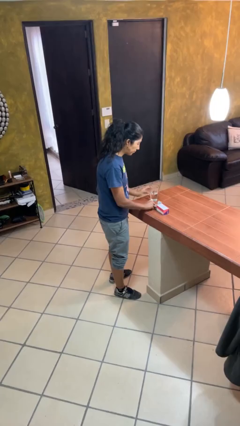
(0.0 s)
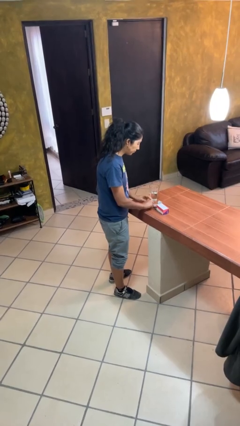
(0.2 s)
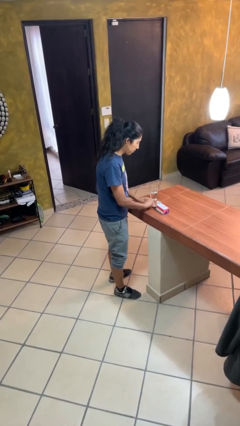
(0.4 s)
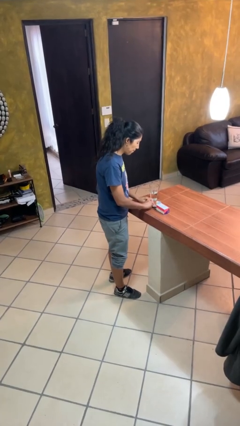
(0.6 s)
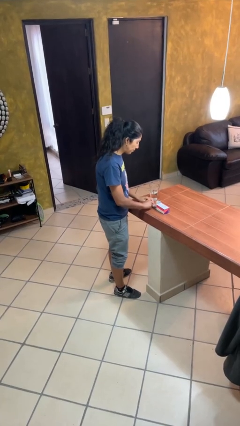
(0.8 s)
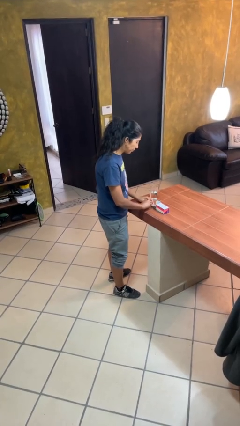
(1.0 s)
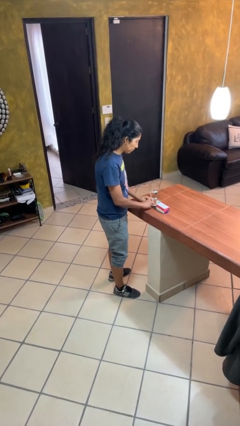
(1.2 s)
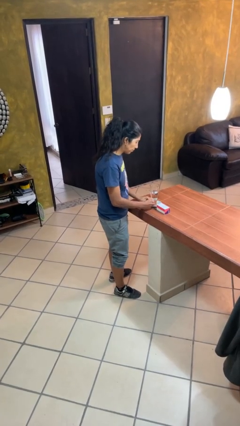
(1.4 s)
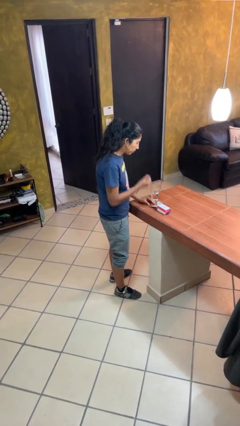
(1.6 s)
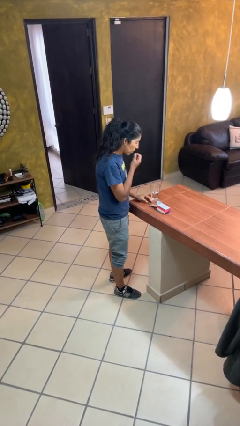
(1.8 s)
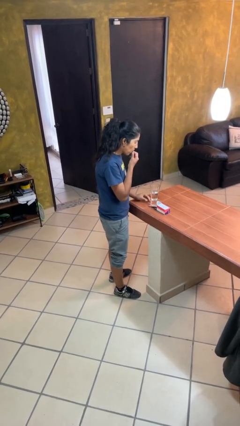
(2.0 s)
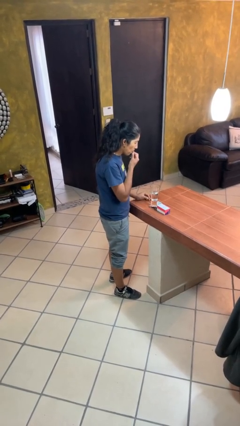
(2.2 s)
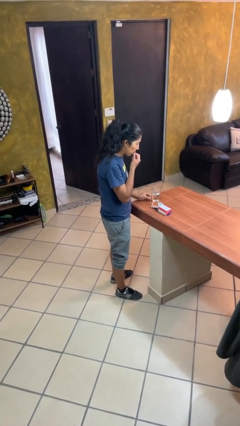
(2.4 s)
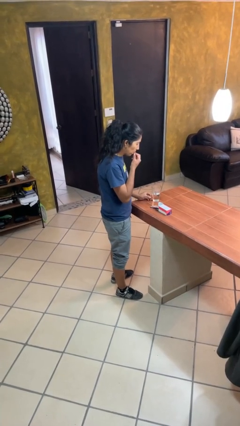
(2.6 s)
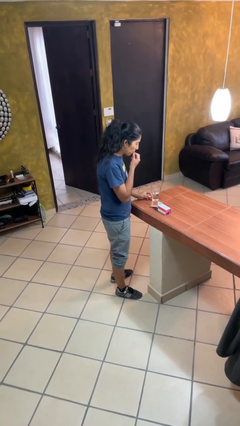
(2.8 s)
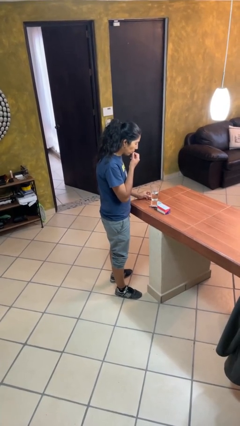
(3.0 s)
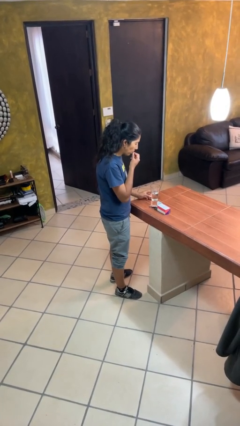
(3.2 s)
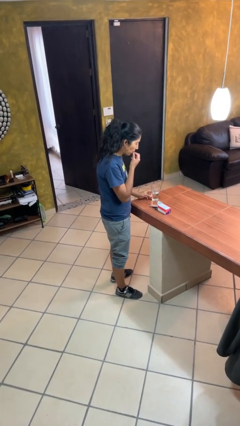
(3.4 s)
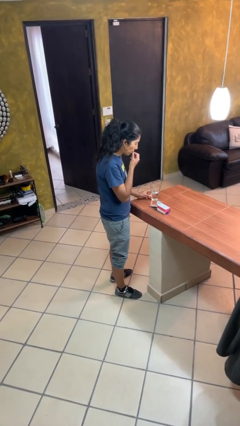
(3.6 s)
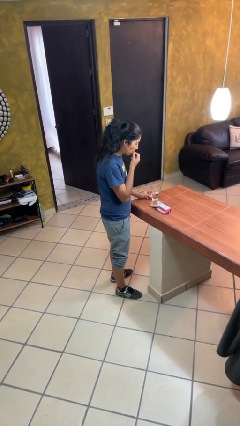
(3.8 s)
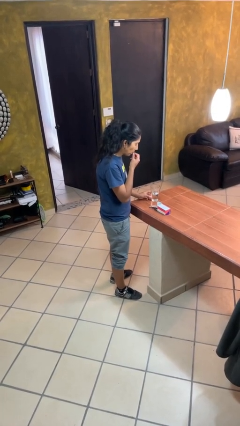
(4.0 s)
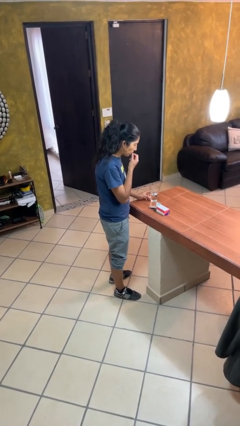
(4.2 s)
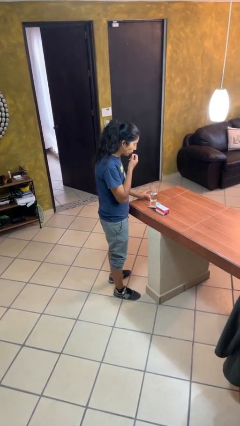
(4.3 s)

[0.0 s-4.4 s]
person takes medicine pills

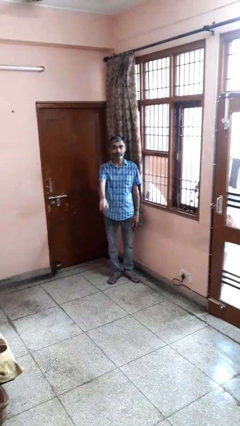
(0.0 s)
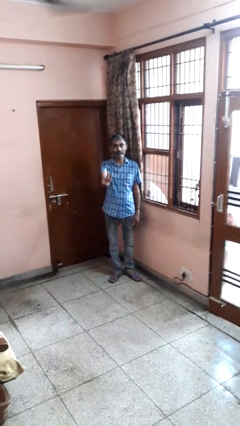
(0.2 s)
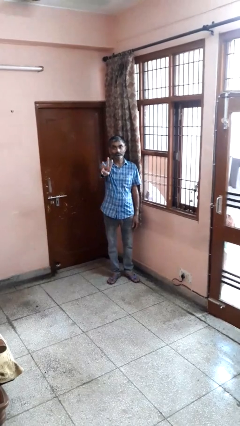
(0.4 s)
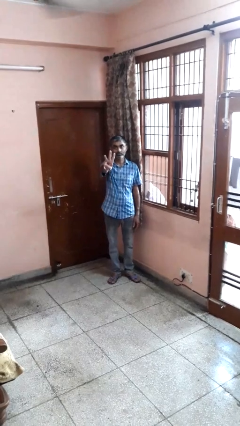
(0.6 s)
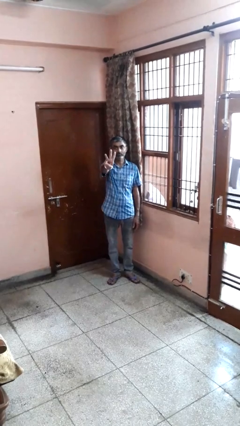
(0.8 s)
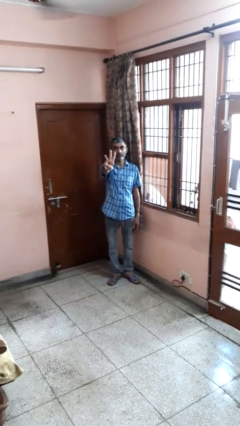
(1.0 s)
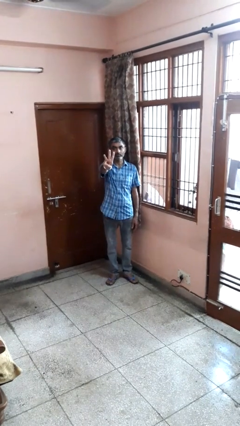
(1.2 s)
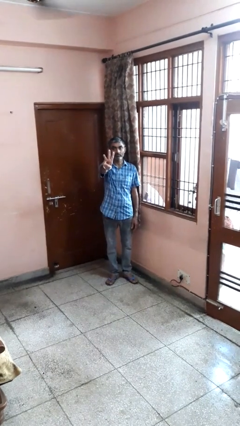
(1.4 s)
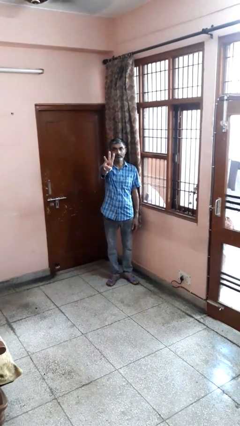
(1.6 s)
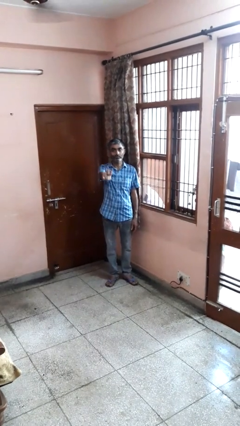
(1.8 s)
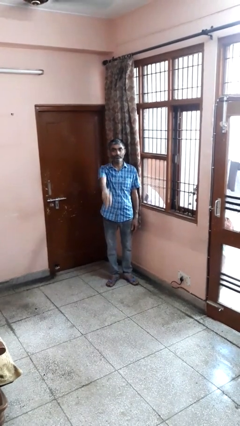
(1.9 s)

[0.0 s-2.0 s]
person gestures number three

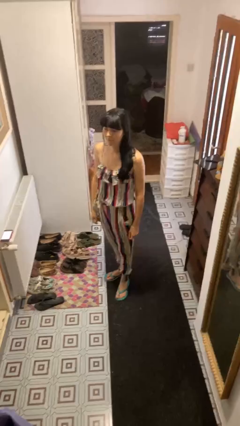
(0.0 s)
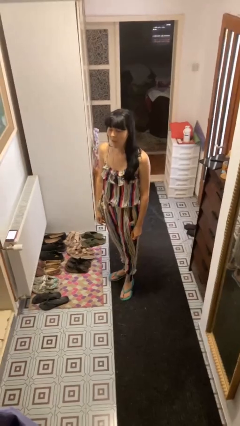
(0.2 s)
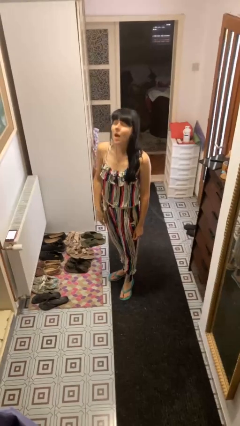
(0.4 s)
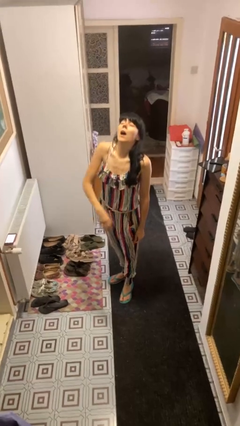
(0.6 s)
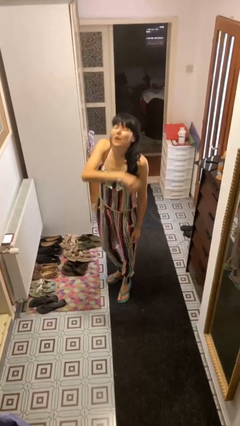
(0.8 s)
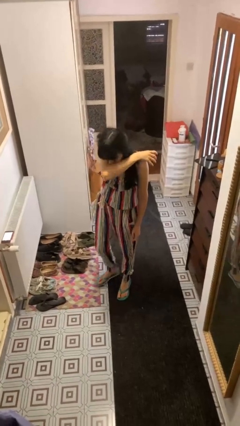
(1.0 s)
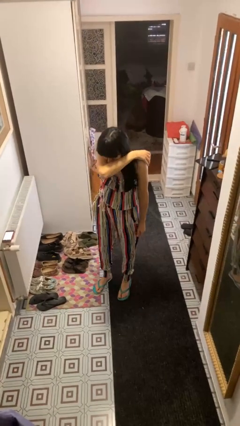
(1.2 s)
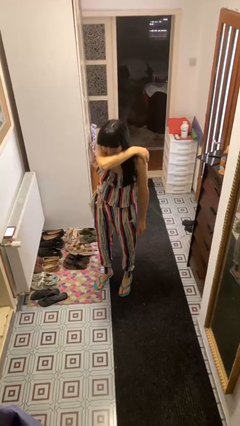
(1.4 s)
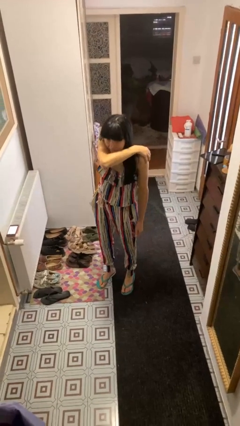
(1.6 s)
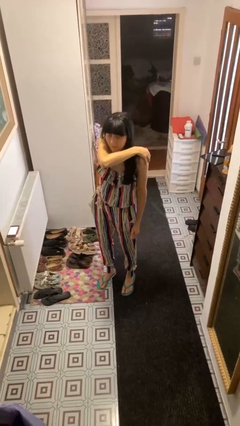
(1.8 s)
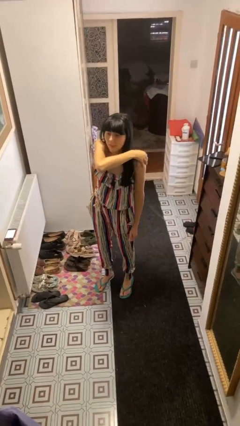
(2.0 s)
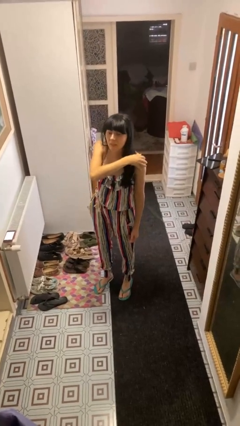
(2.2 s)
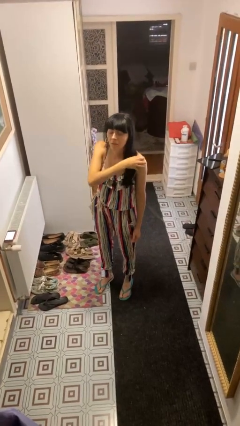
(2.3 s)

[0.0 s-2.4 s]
person sneezes into arm

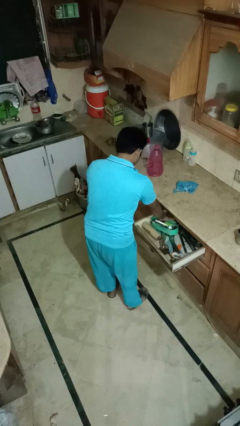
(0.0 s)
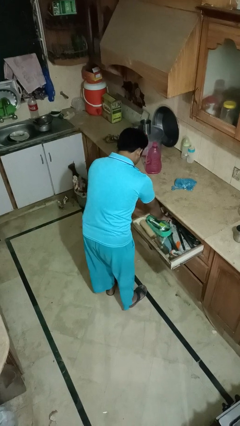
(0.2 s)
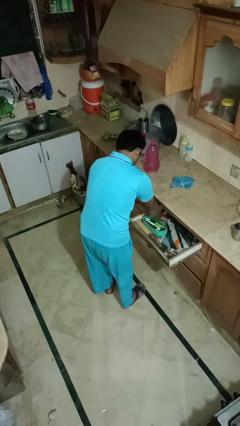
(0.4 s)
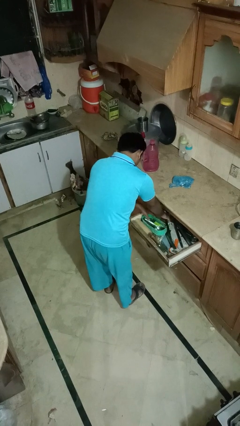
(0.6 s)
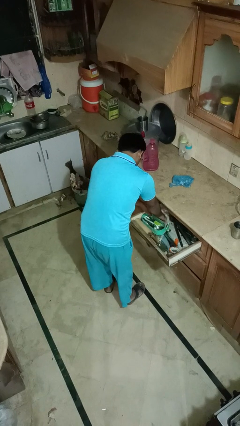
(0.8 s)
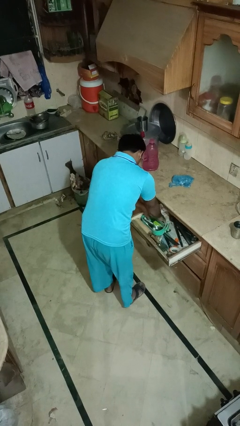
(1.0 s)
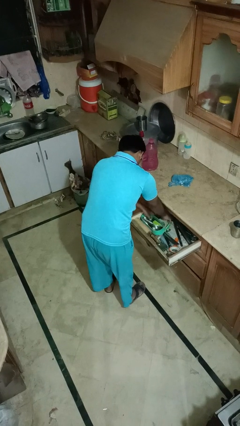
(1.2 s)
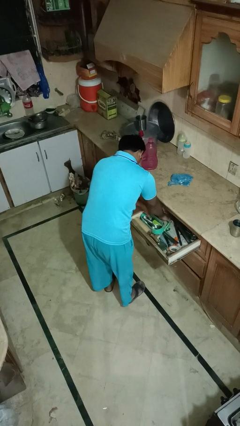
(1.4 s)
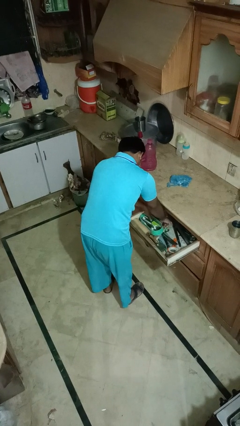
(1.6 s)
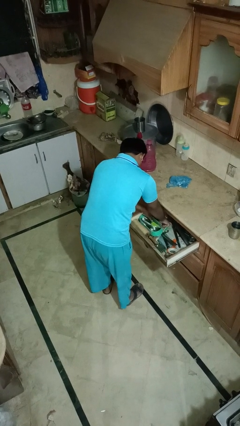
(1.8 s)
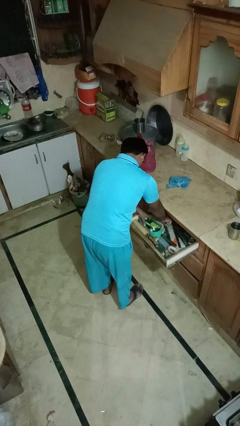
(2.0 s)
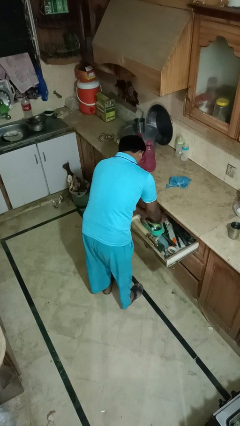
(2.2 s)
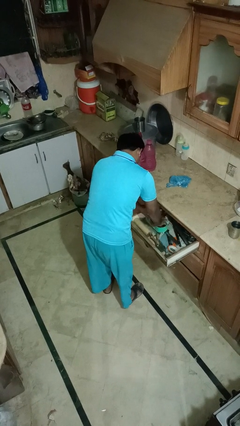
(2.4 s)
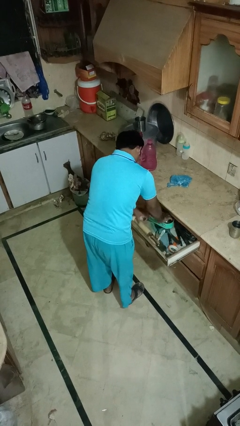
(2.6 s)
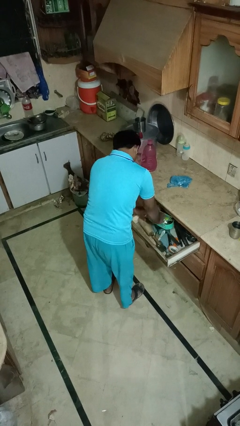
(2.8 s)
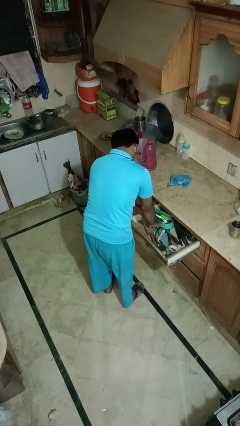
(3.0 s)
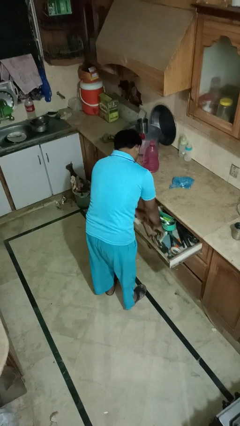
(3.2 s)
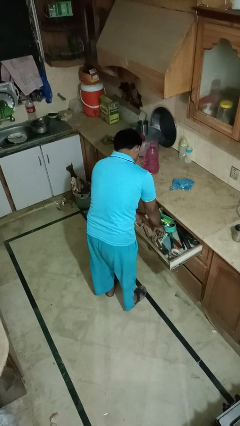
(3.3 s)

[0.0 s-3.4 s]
person searches in kitchen drawer

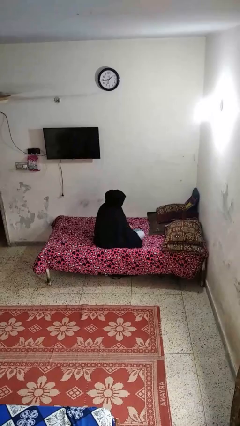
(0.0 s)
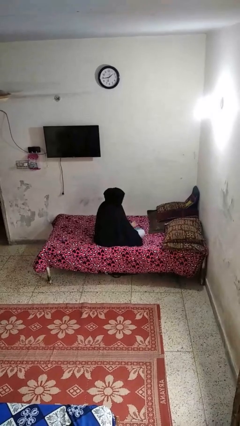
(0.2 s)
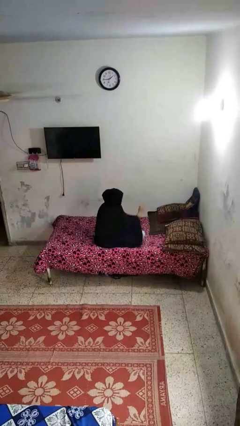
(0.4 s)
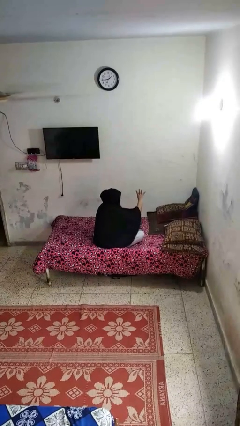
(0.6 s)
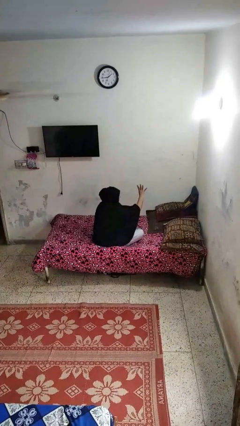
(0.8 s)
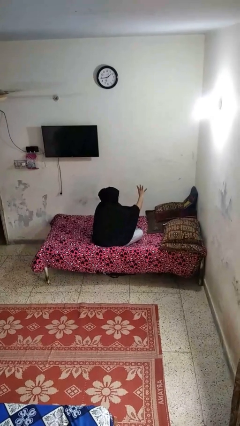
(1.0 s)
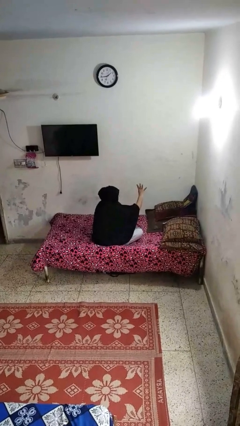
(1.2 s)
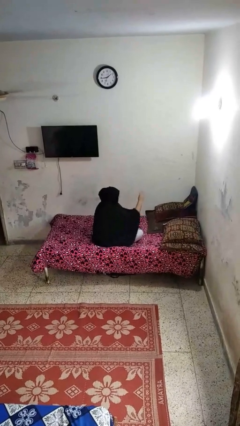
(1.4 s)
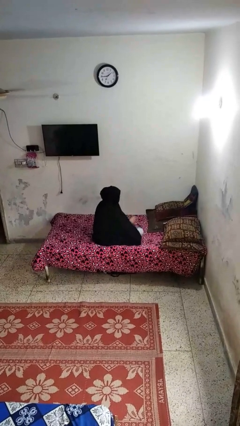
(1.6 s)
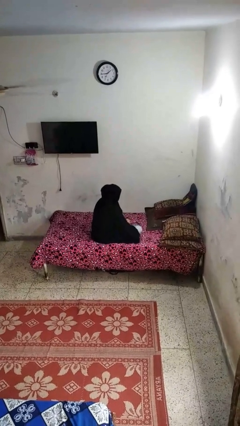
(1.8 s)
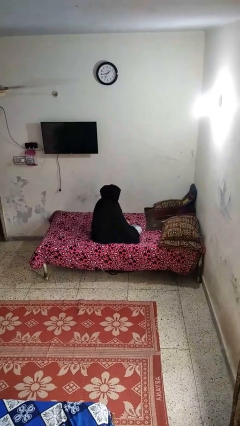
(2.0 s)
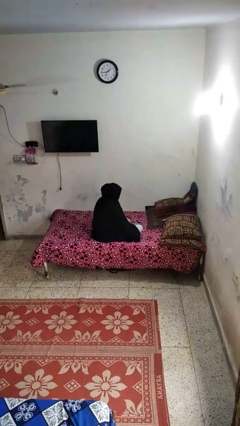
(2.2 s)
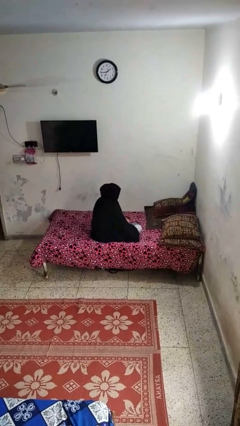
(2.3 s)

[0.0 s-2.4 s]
person gestures number four

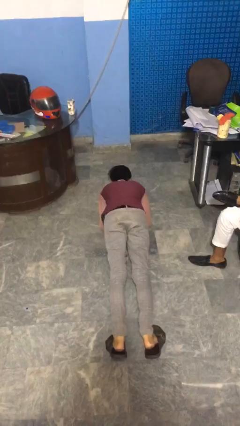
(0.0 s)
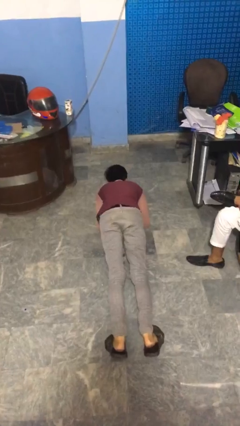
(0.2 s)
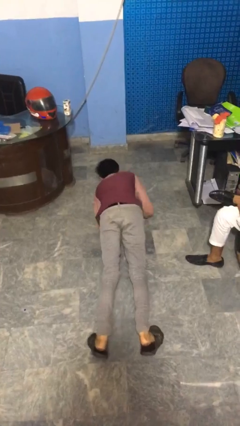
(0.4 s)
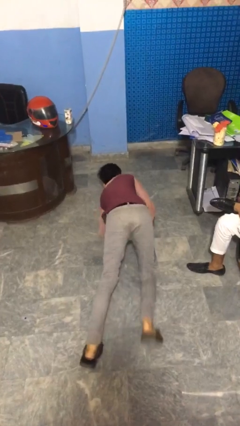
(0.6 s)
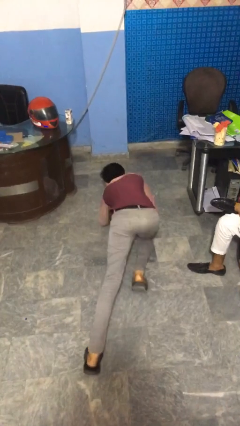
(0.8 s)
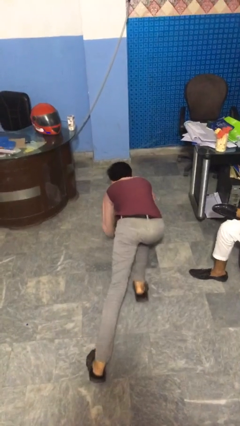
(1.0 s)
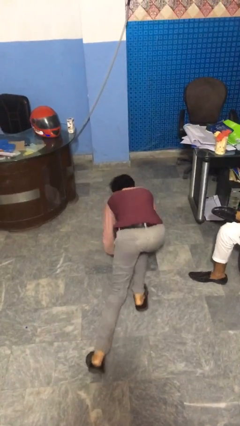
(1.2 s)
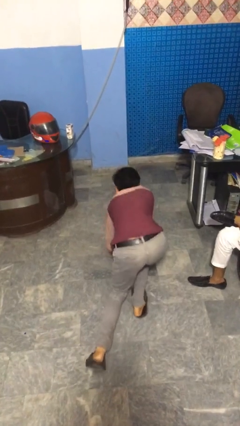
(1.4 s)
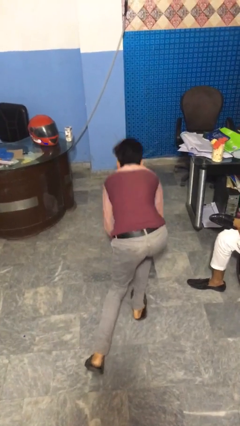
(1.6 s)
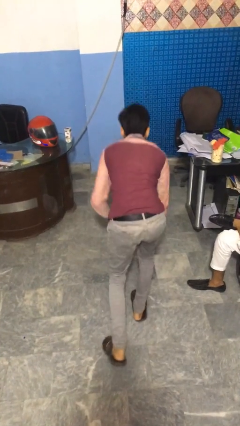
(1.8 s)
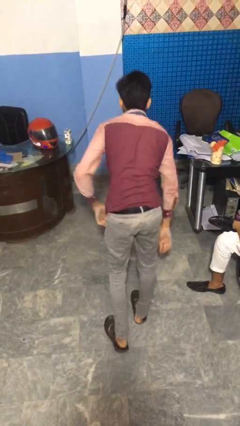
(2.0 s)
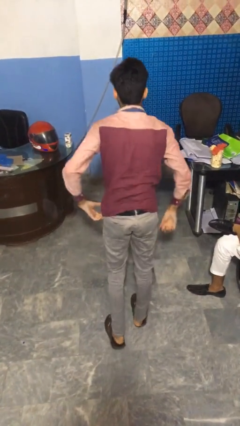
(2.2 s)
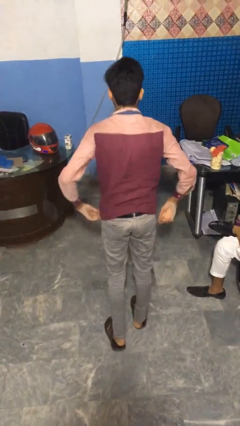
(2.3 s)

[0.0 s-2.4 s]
person stands up from floor
